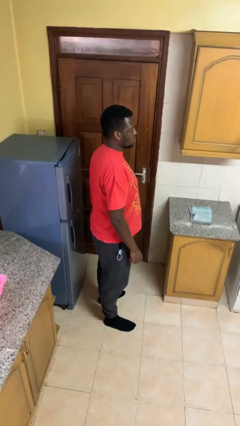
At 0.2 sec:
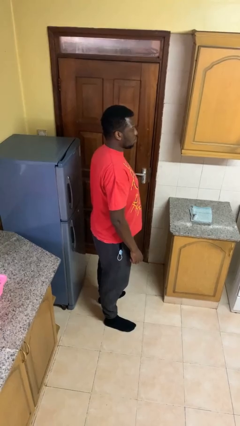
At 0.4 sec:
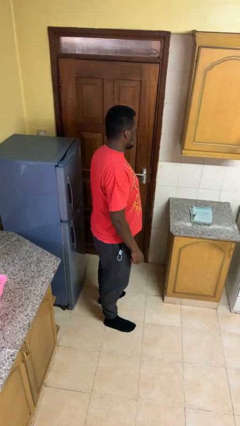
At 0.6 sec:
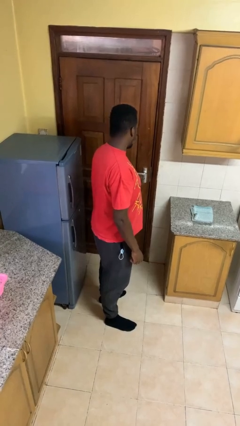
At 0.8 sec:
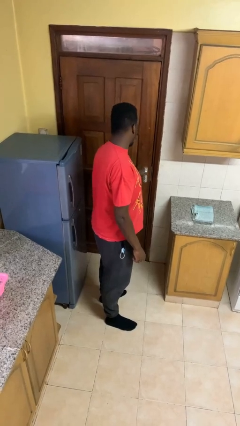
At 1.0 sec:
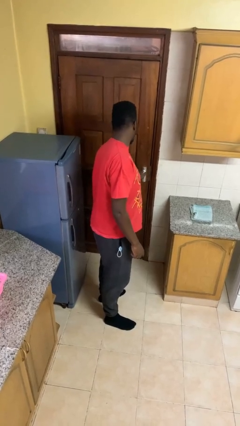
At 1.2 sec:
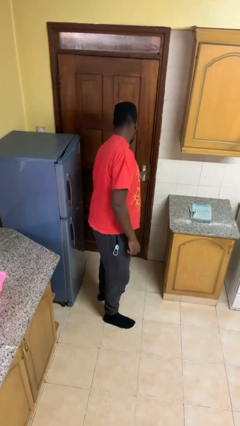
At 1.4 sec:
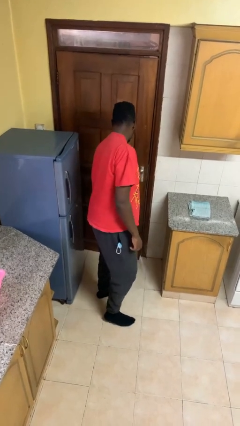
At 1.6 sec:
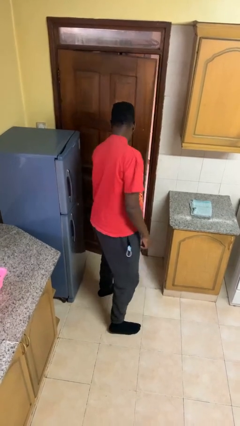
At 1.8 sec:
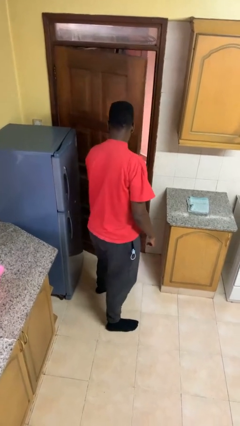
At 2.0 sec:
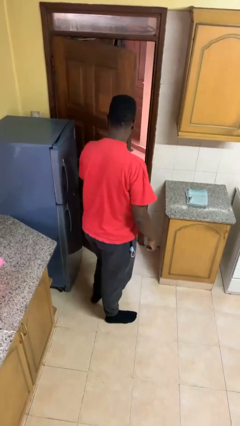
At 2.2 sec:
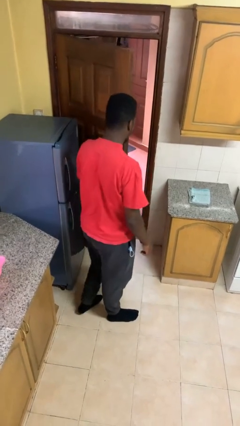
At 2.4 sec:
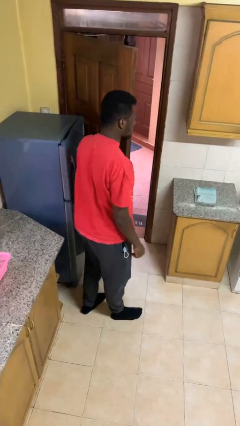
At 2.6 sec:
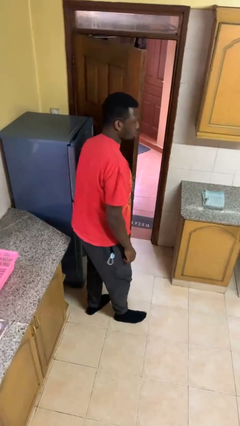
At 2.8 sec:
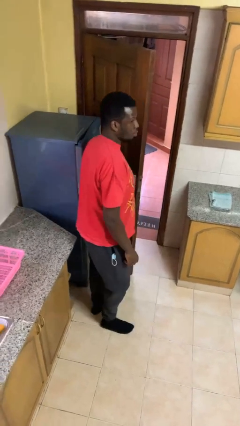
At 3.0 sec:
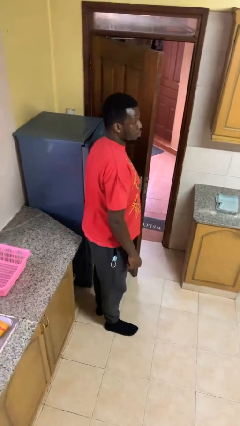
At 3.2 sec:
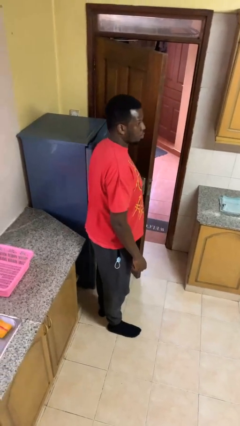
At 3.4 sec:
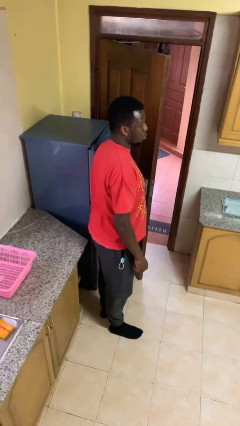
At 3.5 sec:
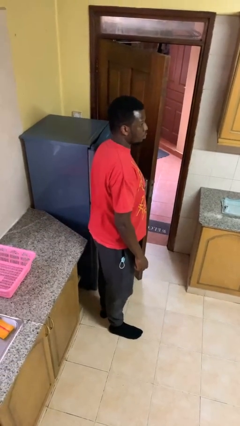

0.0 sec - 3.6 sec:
person opens facility door

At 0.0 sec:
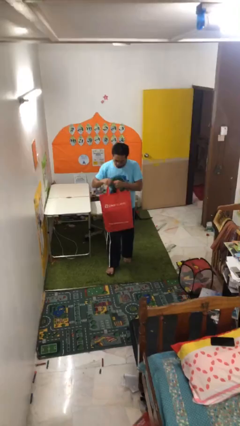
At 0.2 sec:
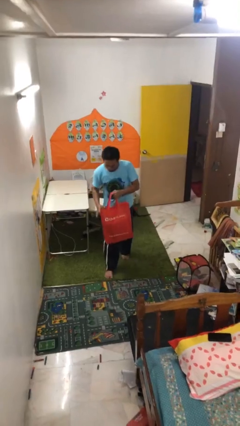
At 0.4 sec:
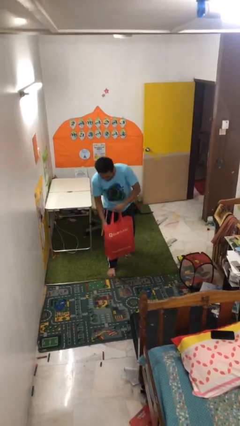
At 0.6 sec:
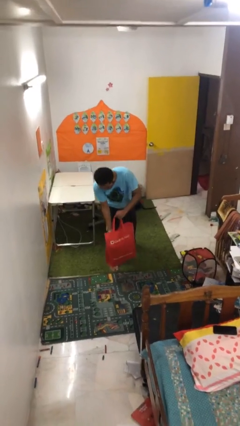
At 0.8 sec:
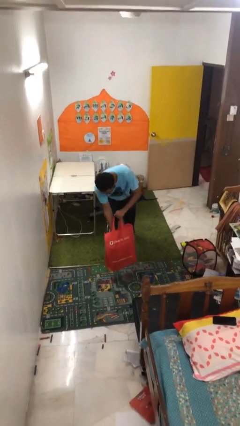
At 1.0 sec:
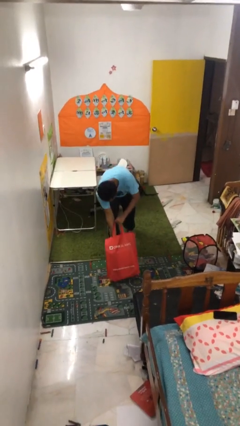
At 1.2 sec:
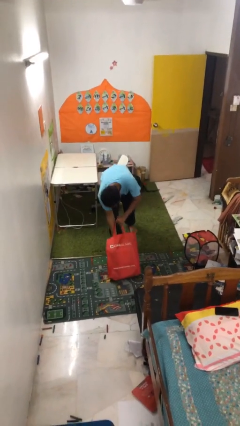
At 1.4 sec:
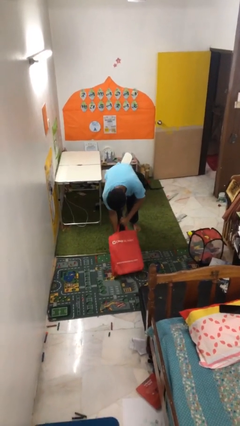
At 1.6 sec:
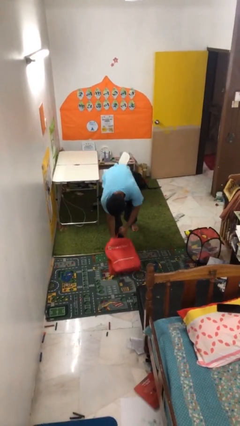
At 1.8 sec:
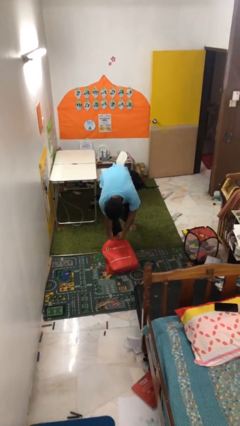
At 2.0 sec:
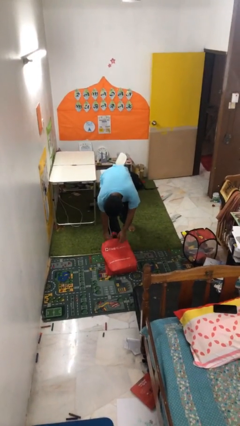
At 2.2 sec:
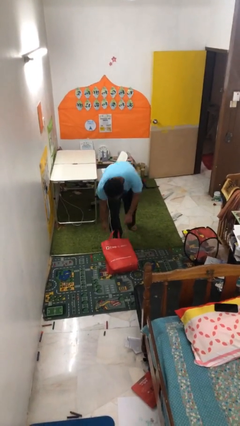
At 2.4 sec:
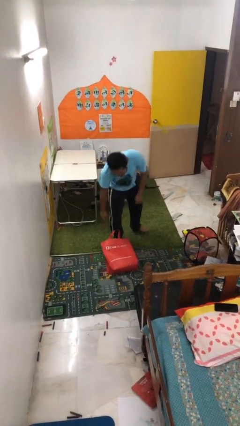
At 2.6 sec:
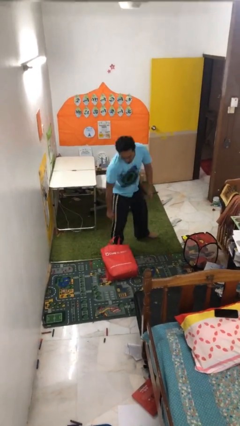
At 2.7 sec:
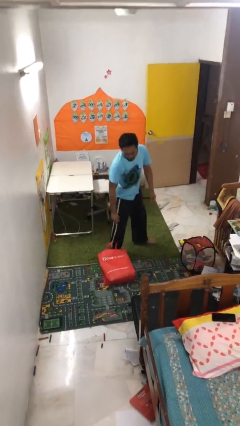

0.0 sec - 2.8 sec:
person puts down object on floor

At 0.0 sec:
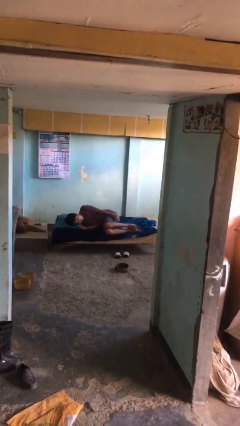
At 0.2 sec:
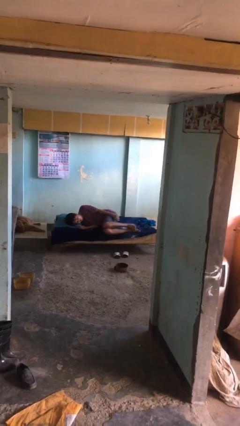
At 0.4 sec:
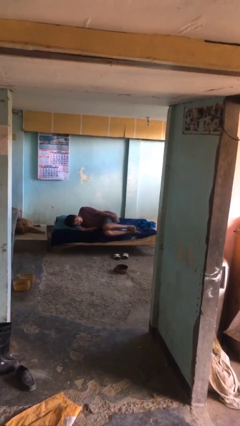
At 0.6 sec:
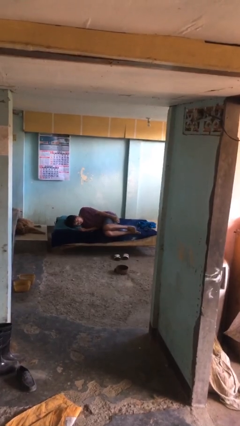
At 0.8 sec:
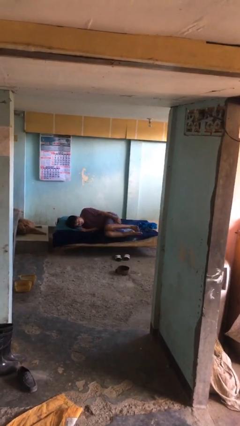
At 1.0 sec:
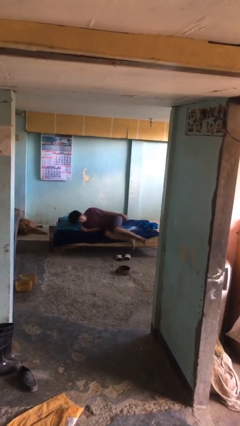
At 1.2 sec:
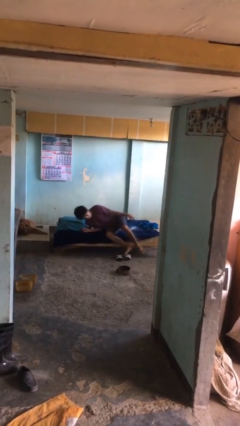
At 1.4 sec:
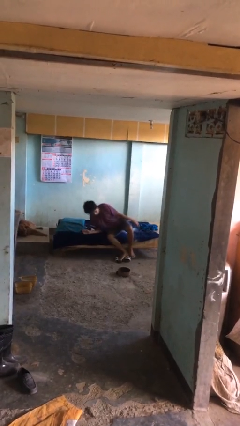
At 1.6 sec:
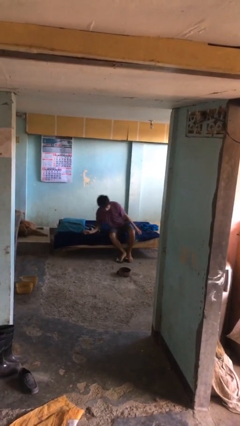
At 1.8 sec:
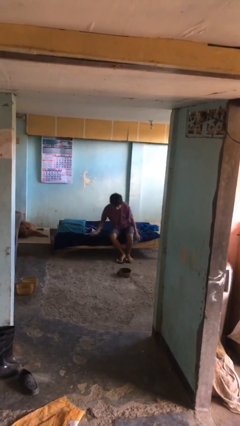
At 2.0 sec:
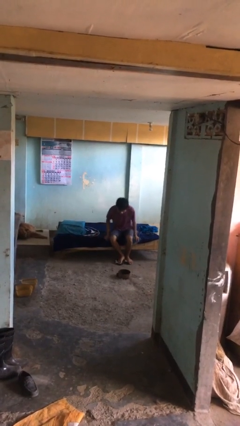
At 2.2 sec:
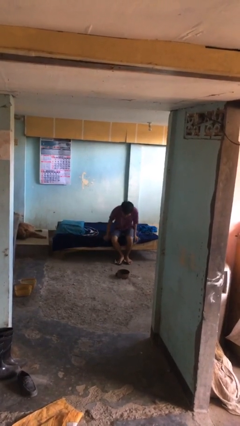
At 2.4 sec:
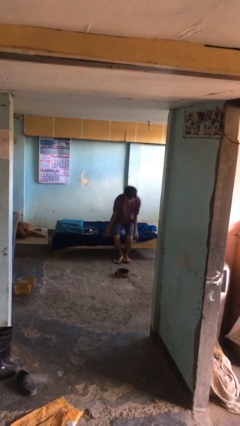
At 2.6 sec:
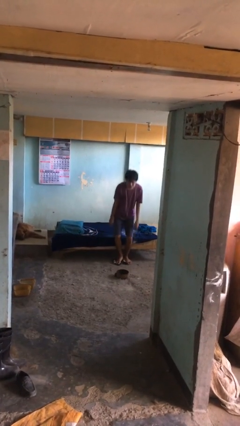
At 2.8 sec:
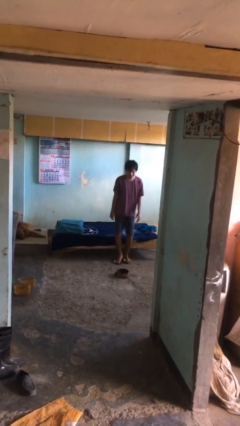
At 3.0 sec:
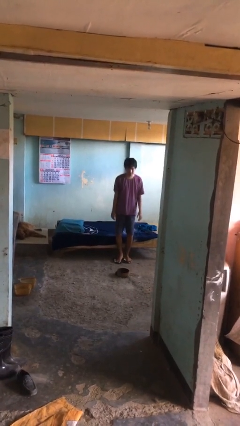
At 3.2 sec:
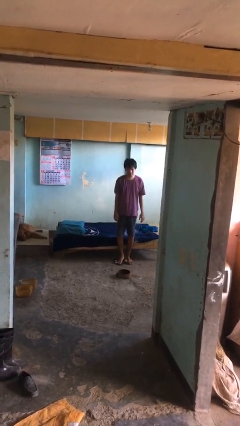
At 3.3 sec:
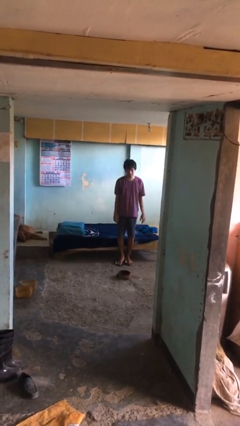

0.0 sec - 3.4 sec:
person stands up

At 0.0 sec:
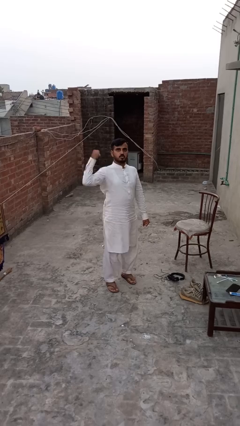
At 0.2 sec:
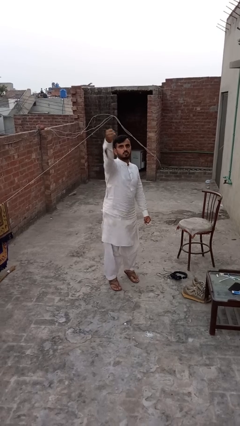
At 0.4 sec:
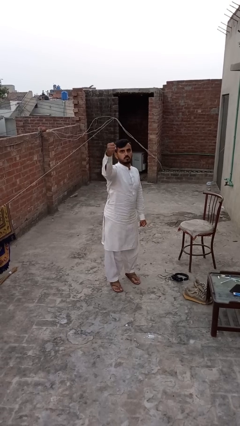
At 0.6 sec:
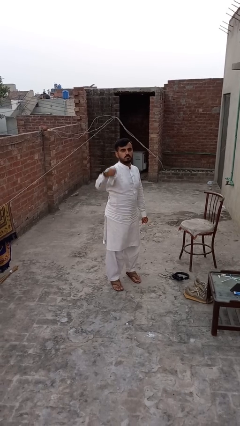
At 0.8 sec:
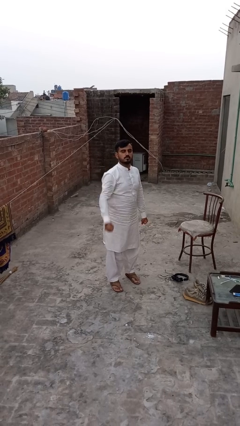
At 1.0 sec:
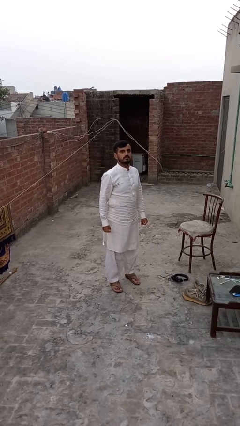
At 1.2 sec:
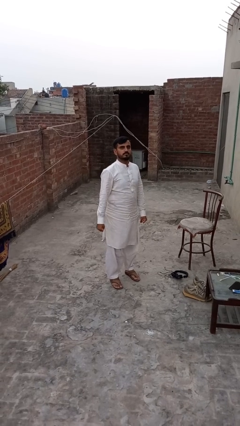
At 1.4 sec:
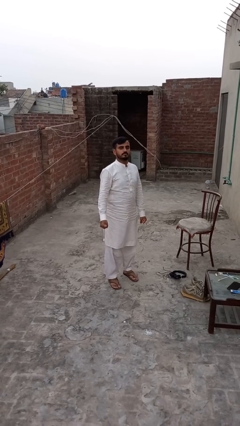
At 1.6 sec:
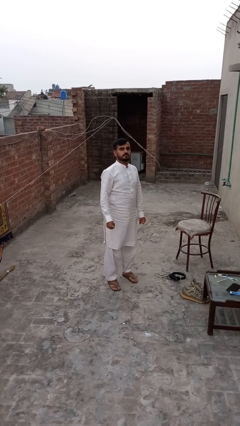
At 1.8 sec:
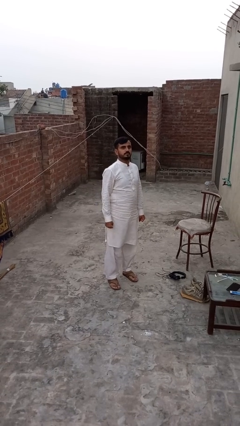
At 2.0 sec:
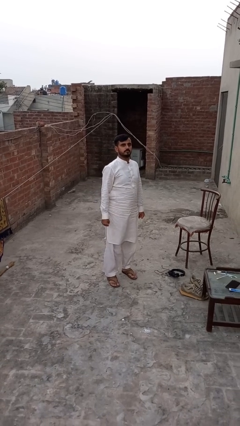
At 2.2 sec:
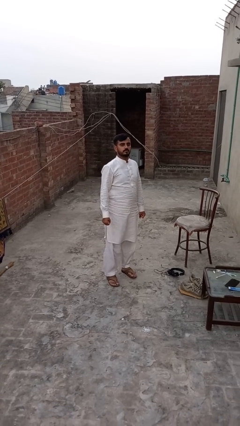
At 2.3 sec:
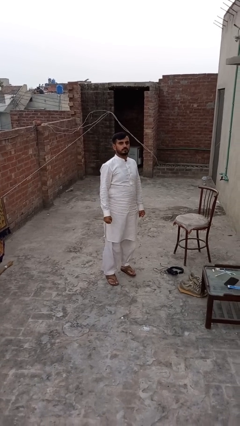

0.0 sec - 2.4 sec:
person punches

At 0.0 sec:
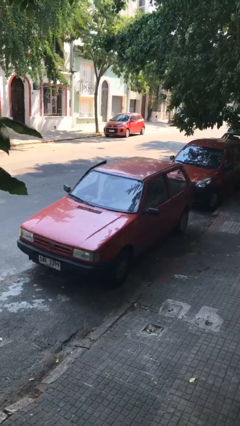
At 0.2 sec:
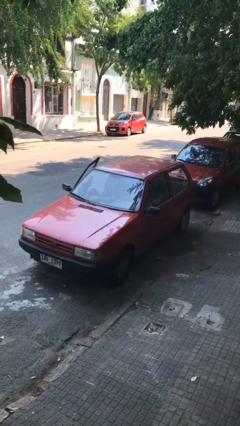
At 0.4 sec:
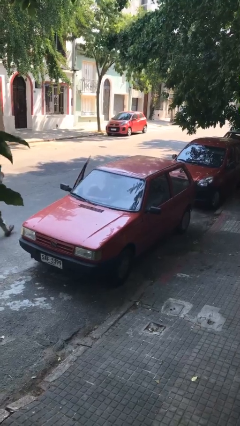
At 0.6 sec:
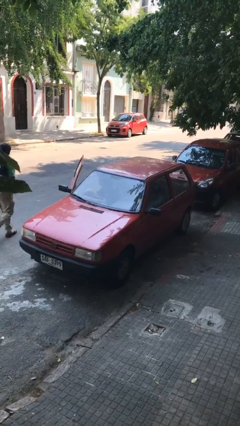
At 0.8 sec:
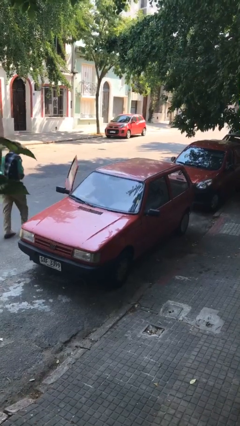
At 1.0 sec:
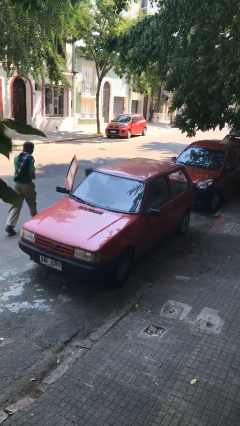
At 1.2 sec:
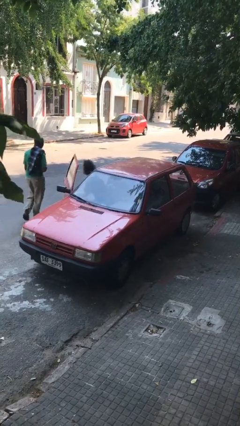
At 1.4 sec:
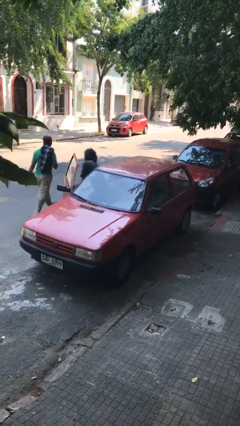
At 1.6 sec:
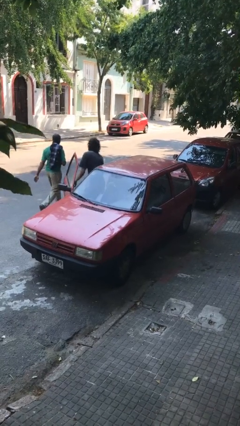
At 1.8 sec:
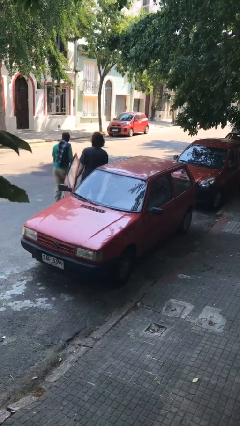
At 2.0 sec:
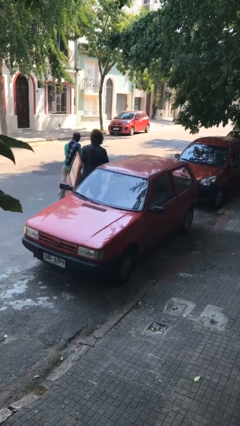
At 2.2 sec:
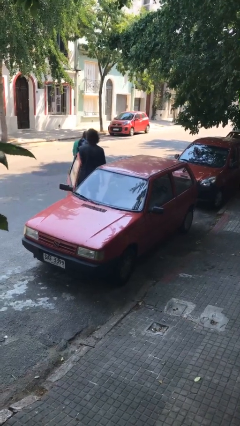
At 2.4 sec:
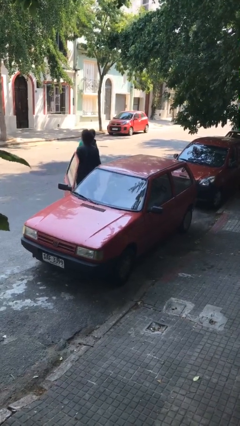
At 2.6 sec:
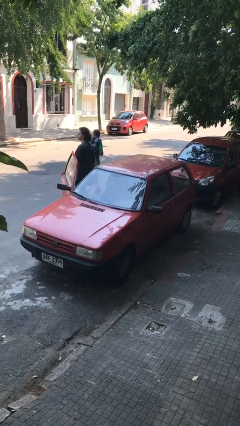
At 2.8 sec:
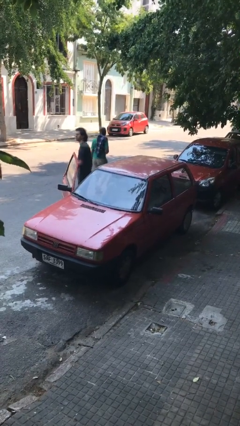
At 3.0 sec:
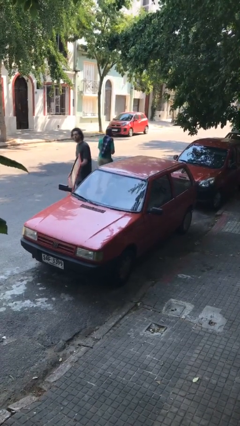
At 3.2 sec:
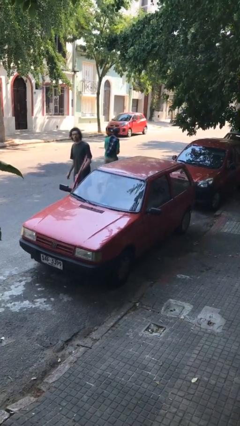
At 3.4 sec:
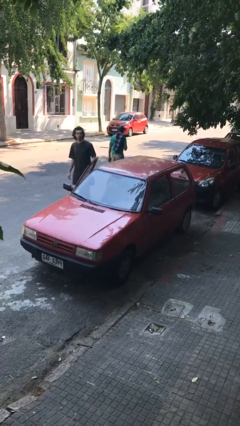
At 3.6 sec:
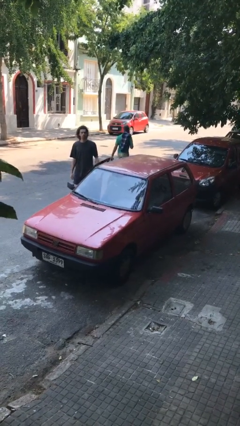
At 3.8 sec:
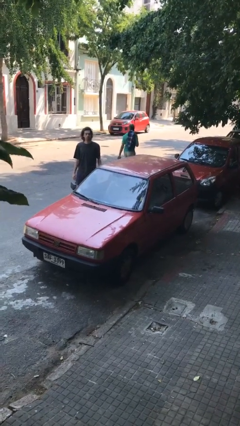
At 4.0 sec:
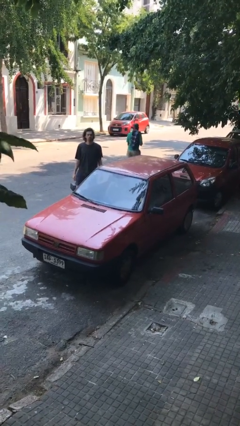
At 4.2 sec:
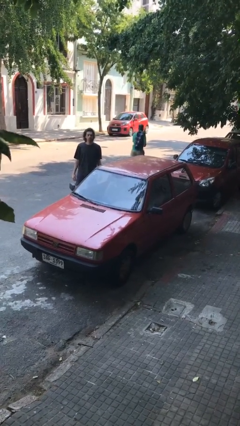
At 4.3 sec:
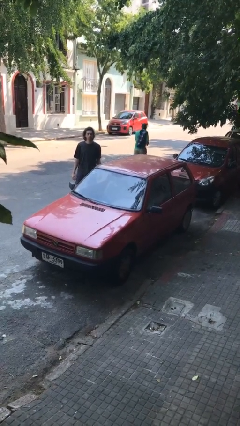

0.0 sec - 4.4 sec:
car drops off person

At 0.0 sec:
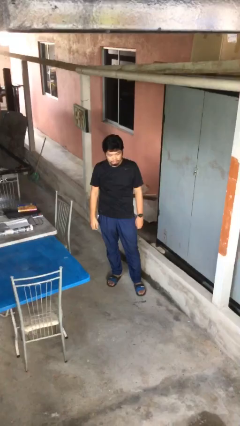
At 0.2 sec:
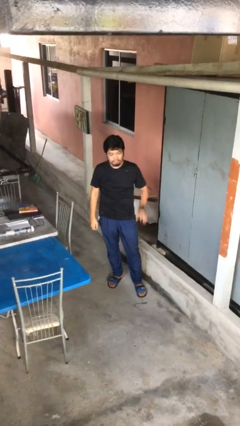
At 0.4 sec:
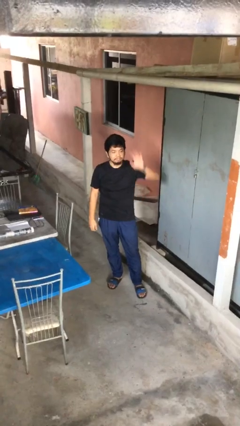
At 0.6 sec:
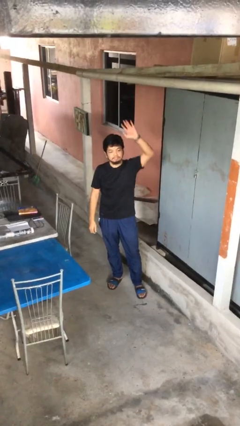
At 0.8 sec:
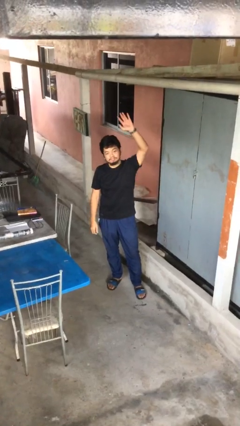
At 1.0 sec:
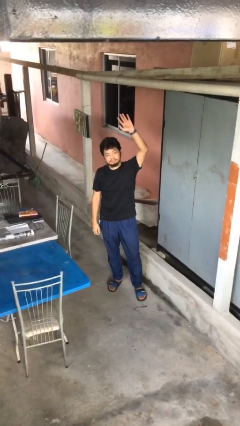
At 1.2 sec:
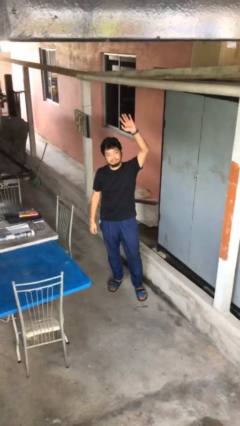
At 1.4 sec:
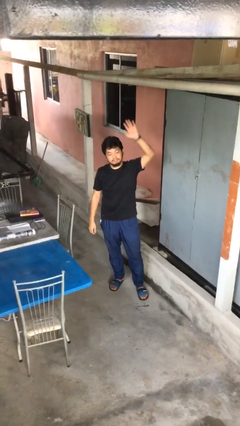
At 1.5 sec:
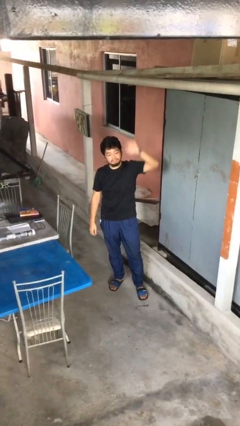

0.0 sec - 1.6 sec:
person gestures raise hand
